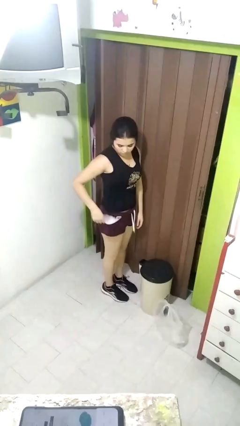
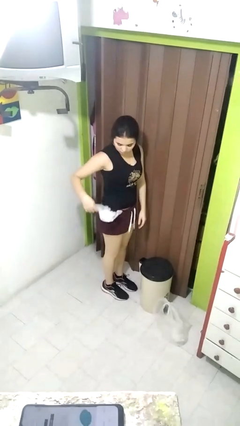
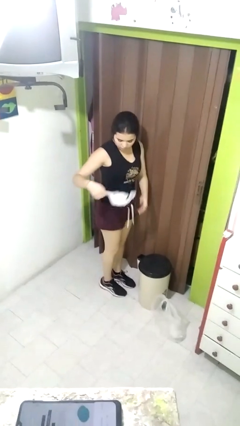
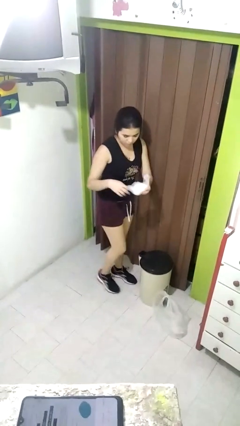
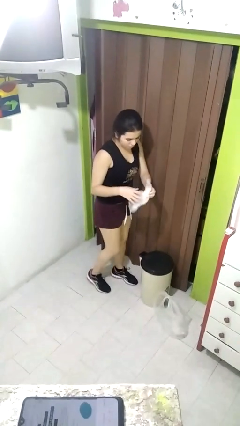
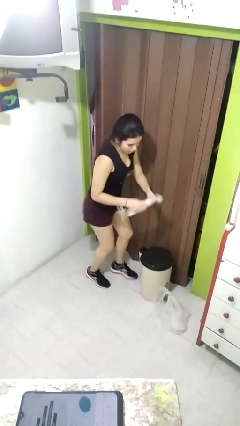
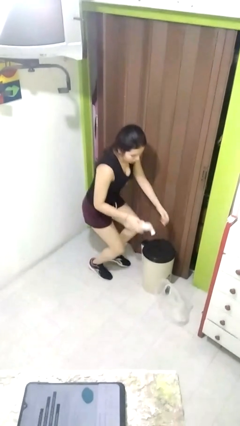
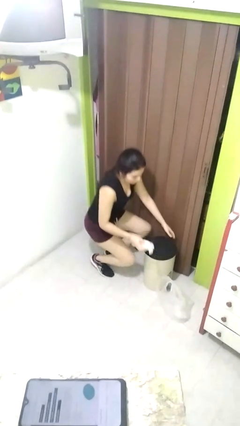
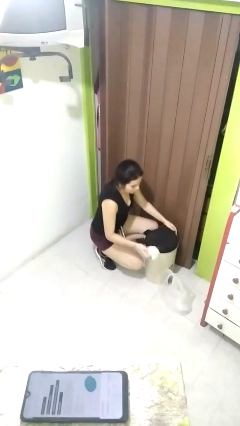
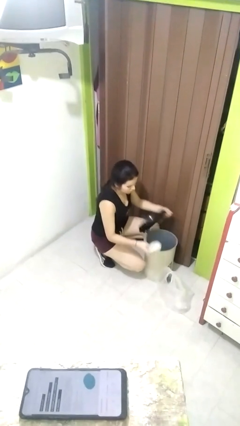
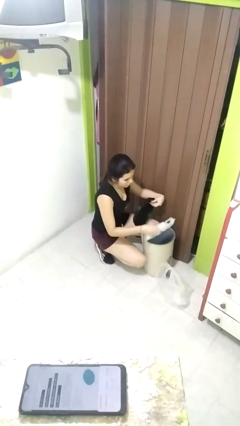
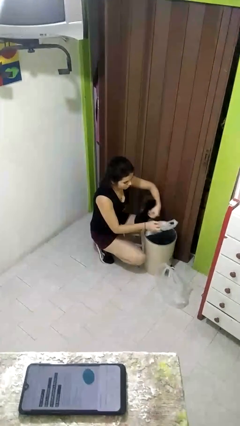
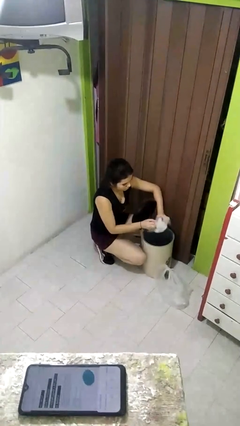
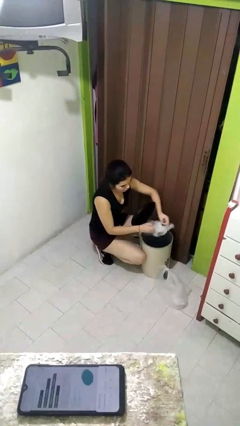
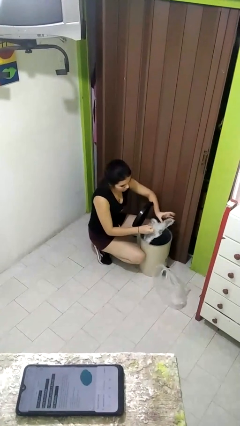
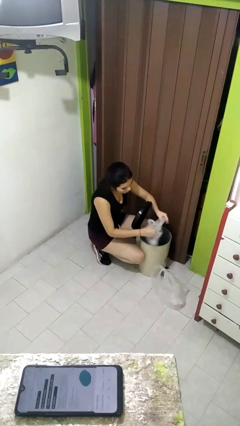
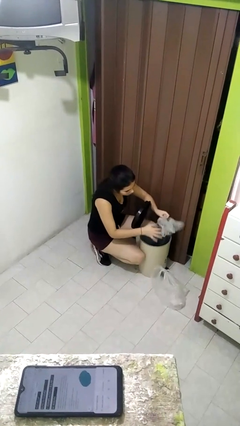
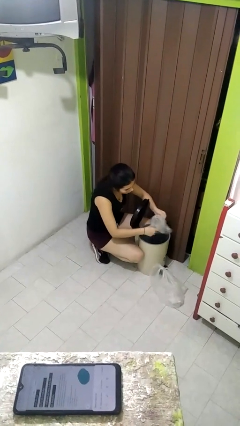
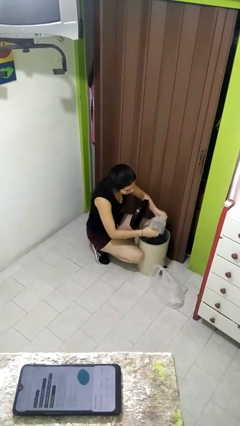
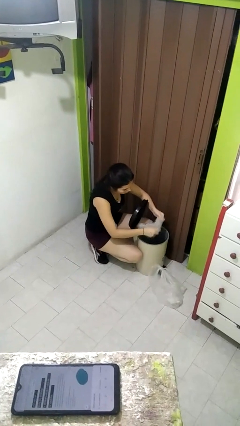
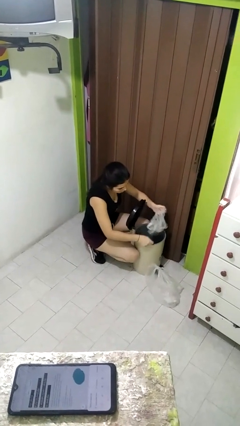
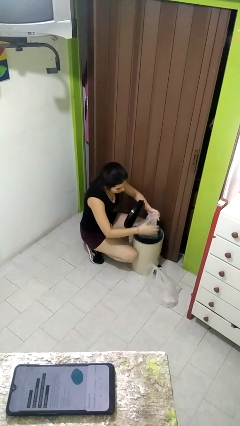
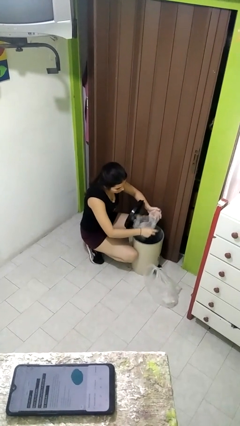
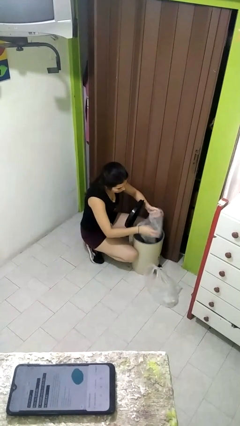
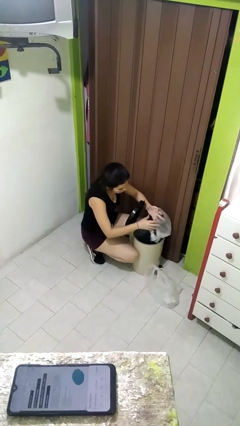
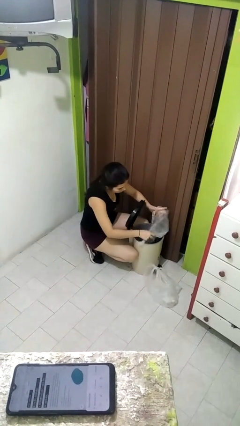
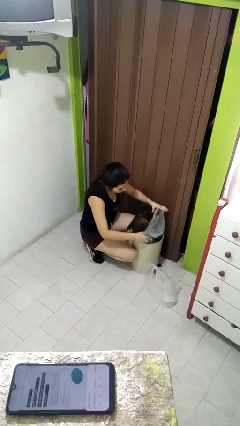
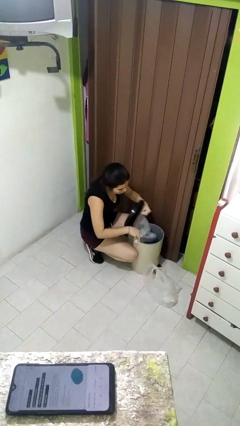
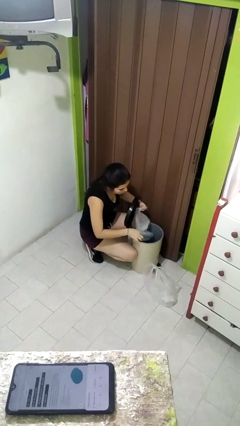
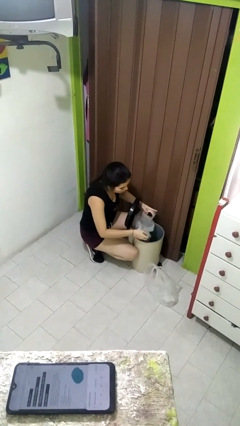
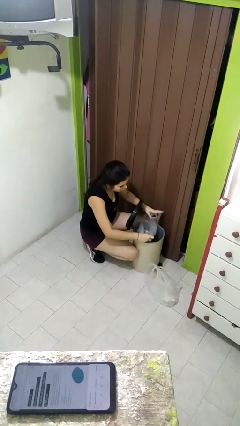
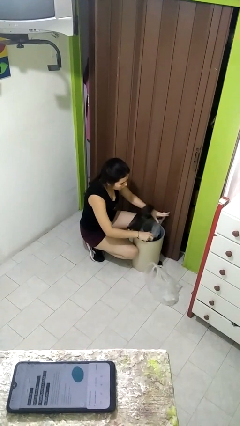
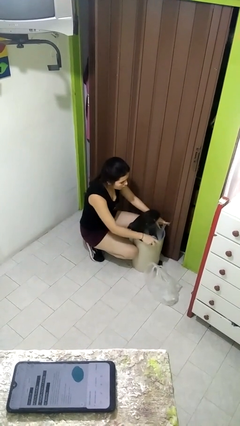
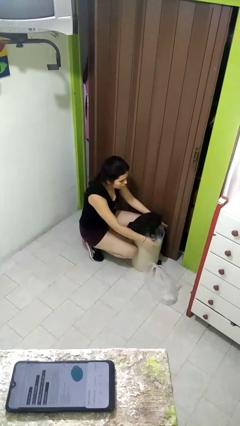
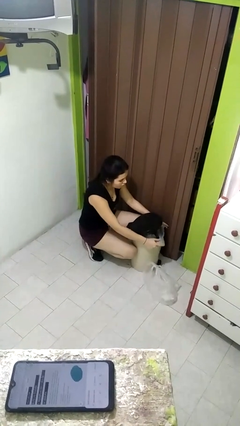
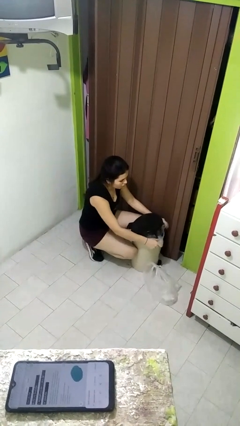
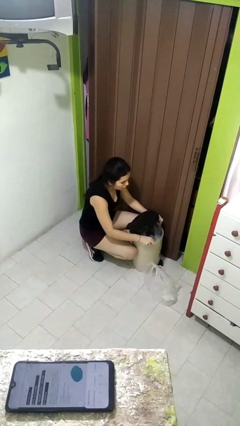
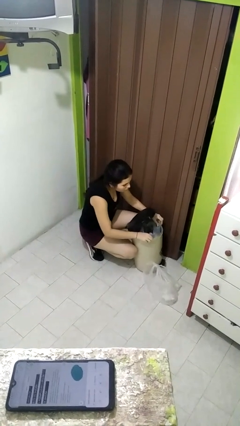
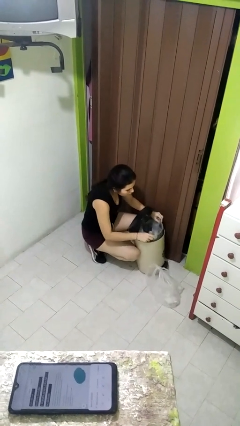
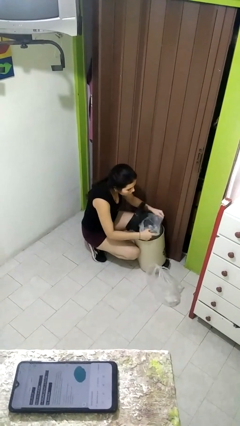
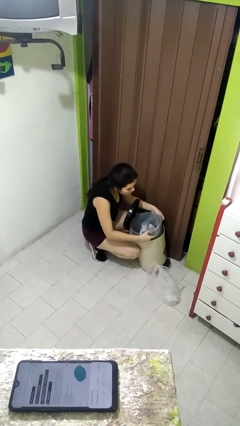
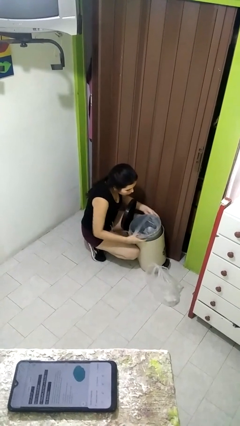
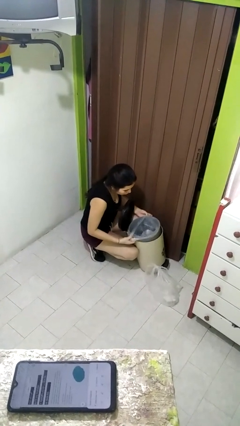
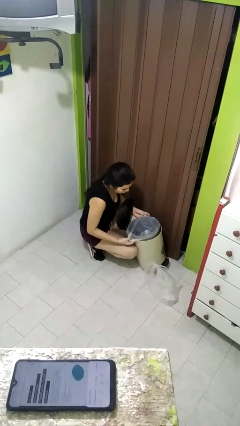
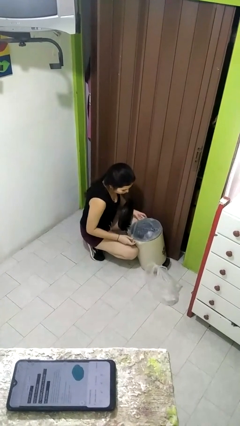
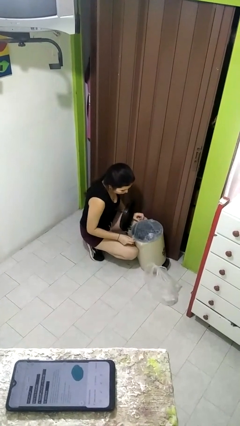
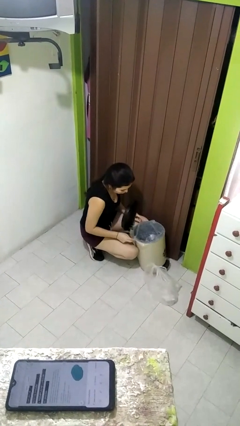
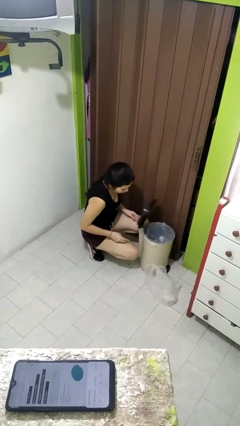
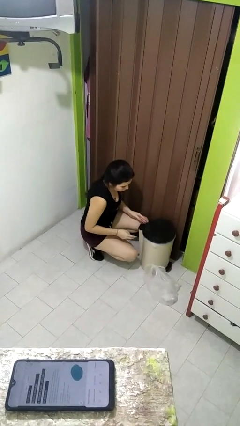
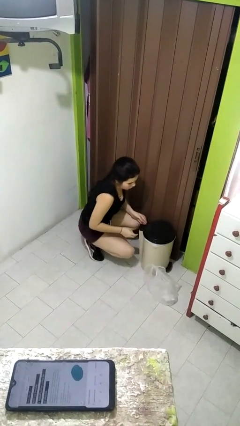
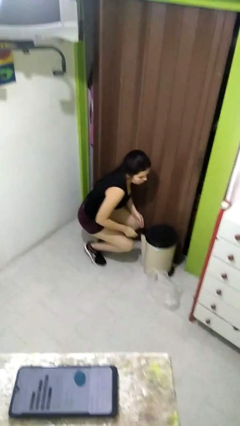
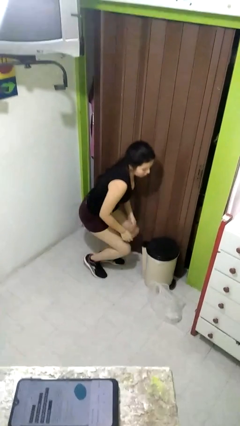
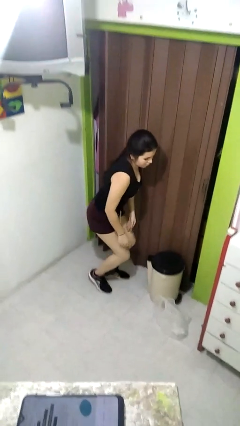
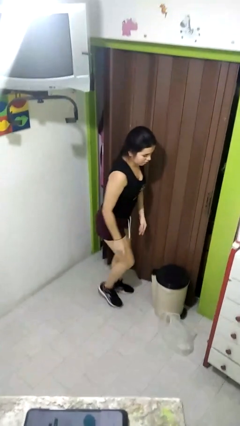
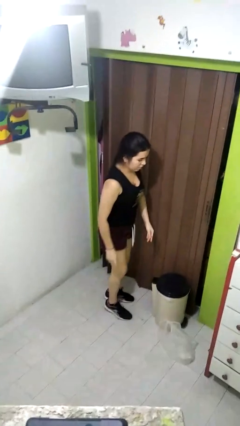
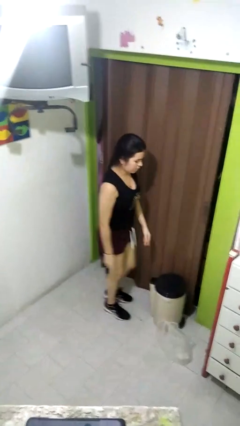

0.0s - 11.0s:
person inserts trashbag into trashcan

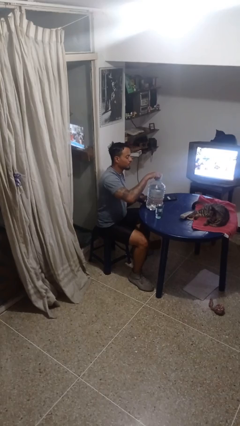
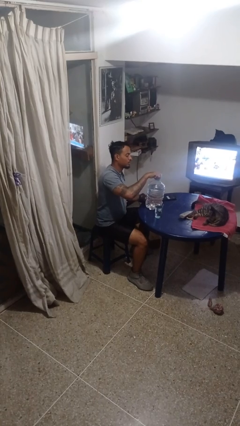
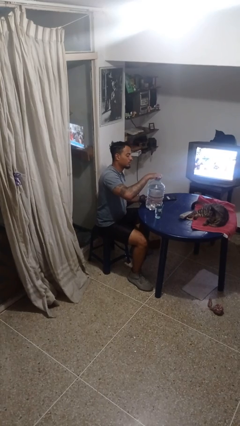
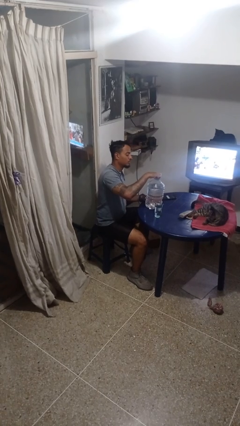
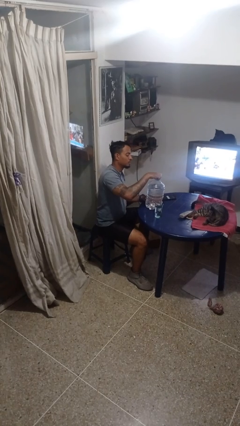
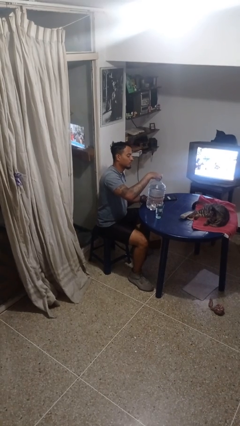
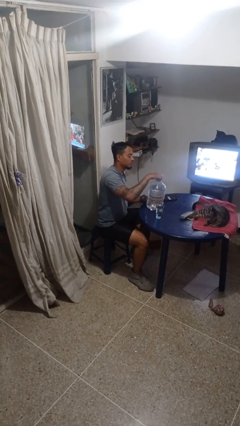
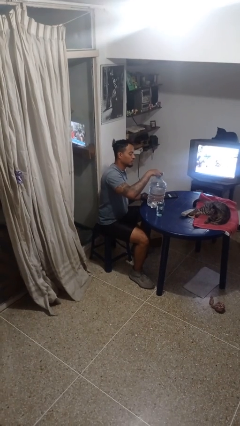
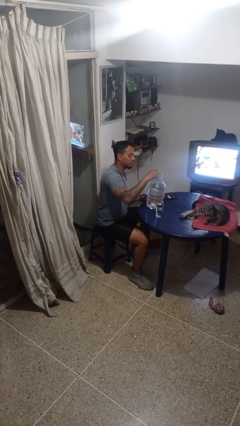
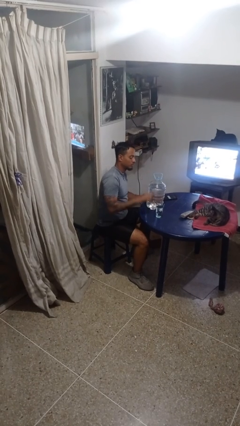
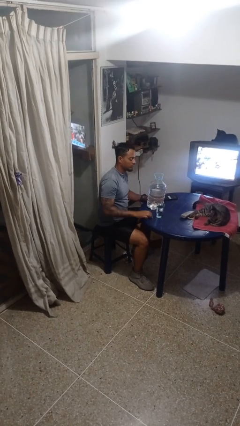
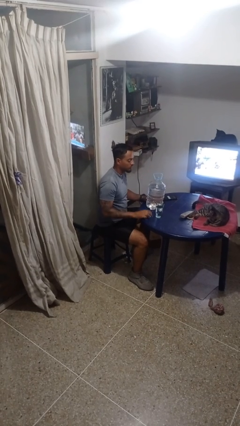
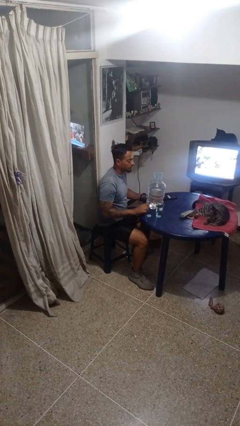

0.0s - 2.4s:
person unscrews lid from bottle

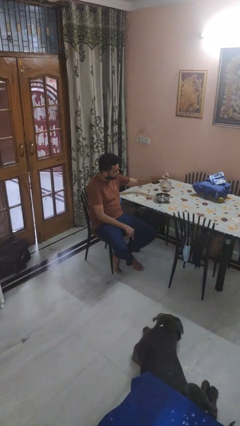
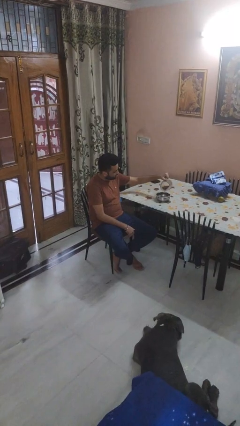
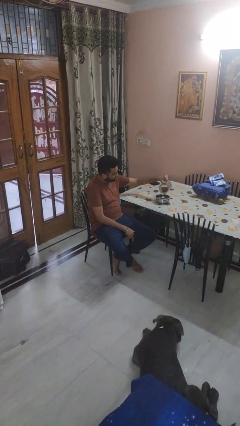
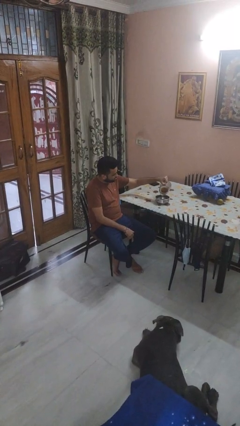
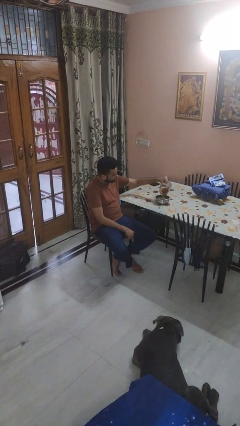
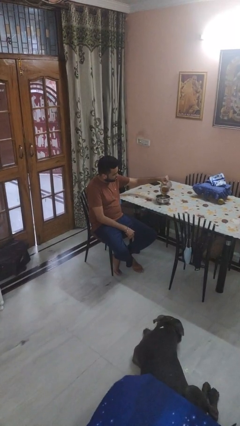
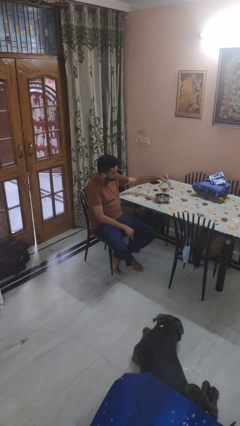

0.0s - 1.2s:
person pours into bowl

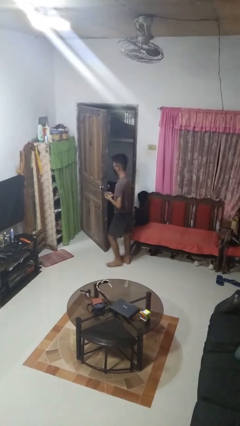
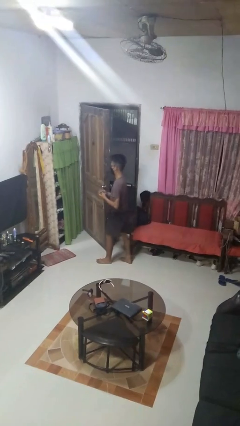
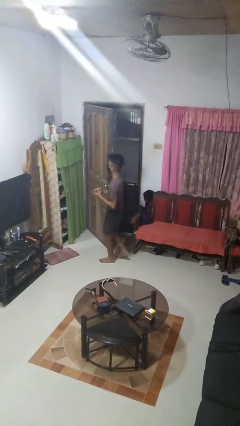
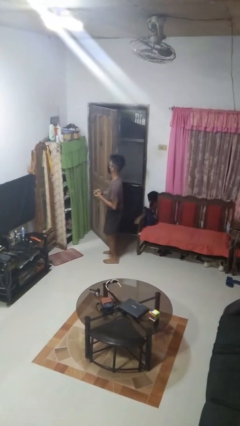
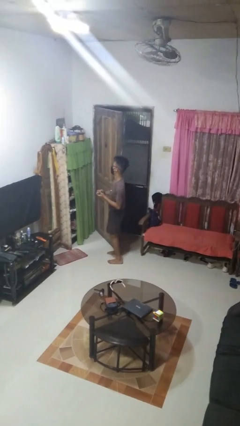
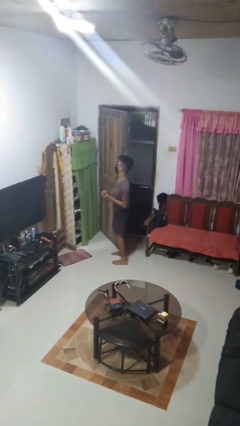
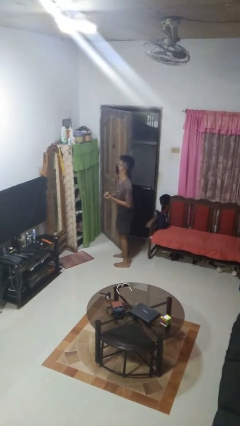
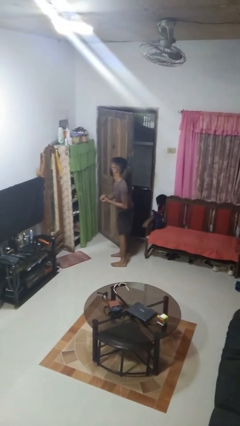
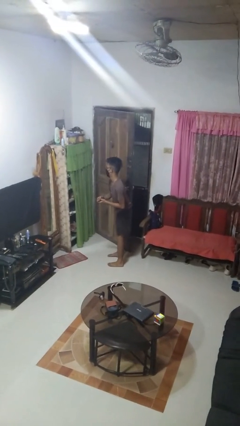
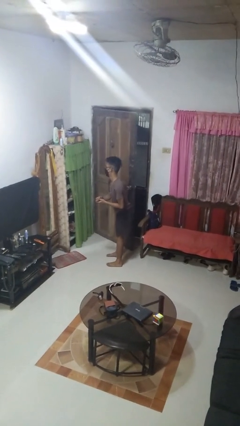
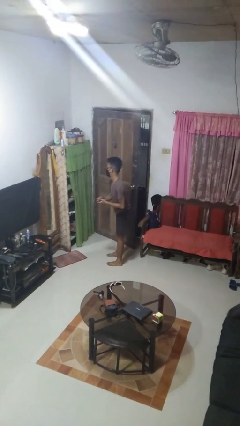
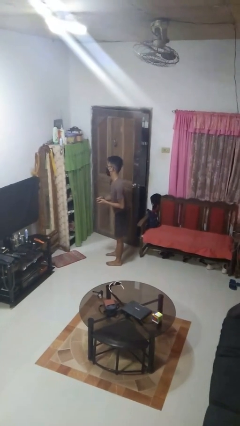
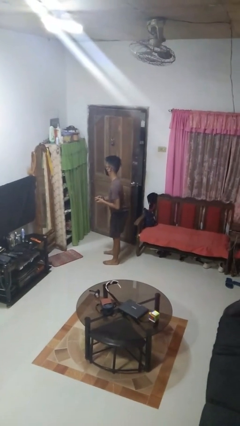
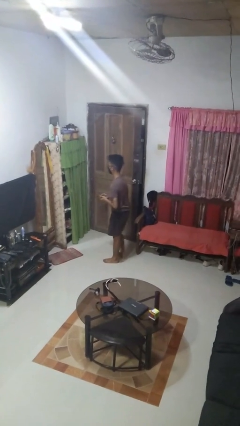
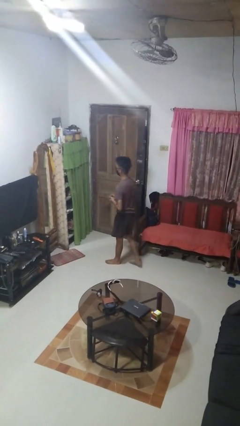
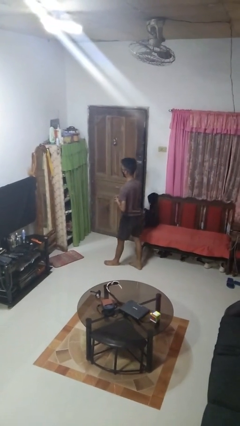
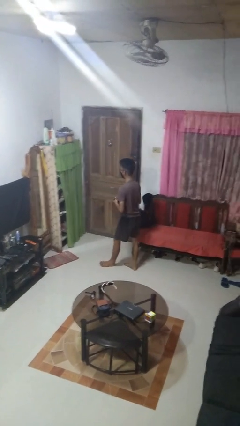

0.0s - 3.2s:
person closes door with hip
